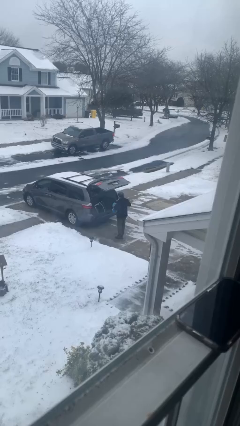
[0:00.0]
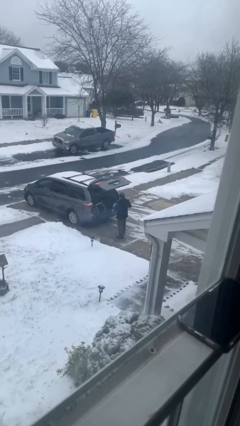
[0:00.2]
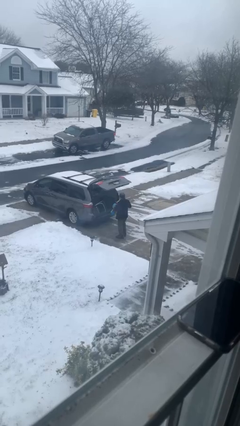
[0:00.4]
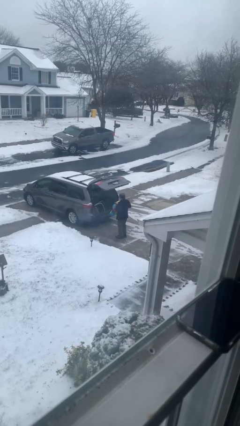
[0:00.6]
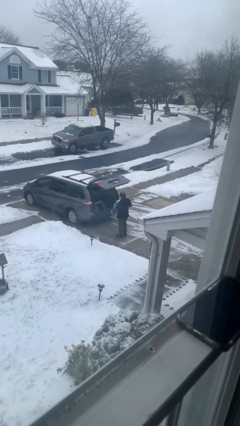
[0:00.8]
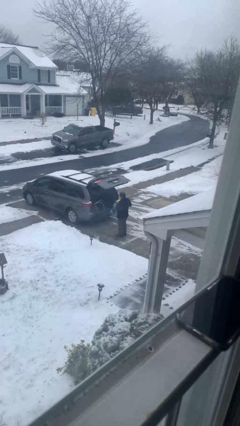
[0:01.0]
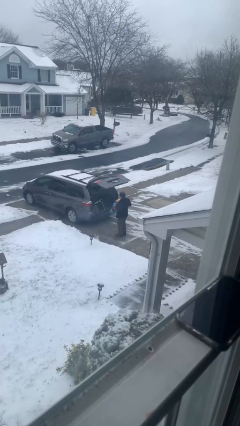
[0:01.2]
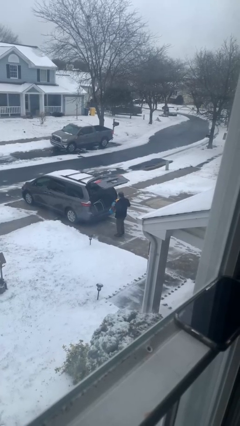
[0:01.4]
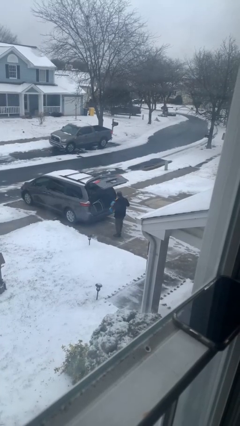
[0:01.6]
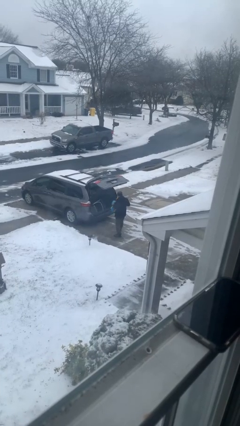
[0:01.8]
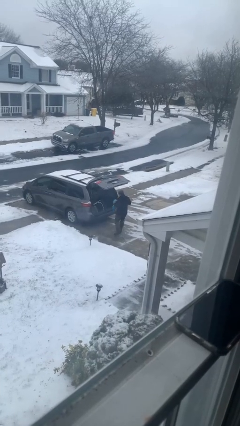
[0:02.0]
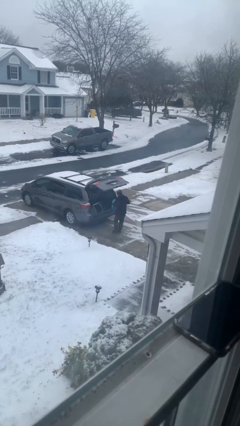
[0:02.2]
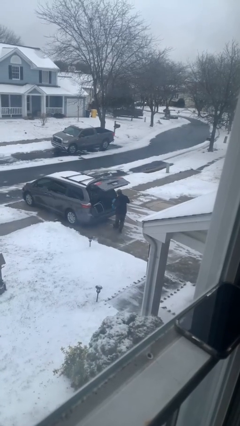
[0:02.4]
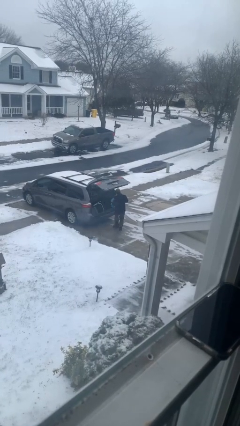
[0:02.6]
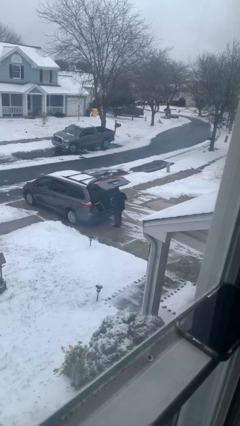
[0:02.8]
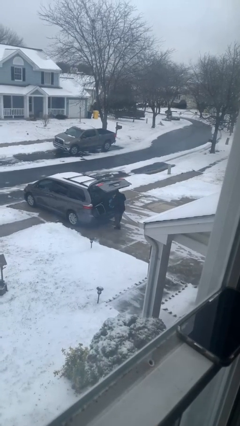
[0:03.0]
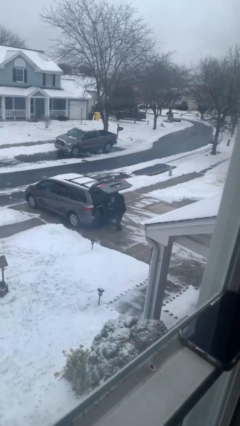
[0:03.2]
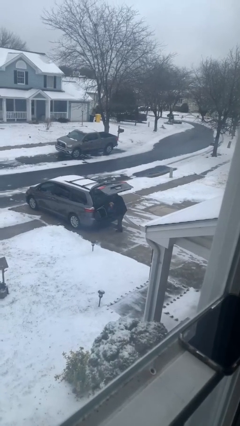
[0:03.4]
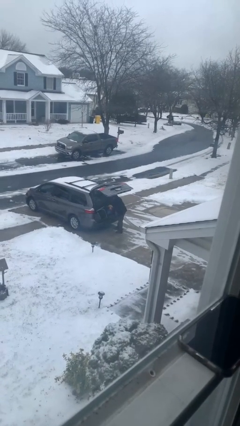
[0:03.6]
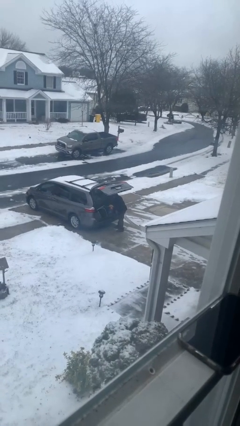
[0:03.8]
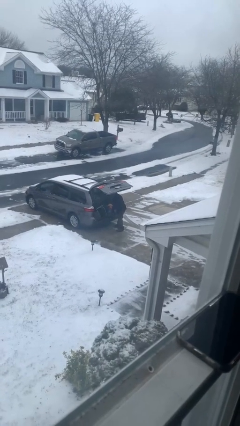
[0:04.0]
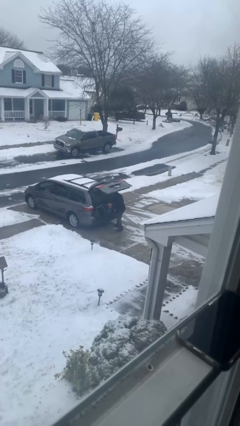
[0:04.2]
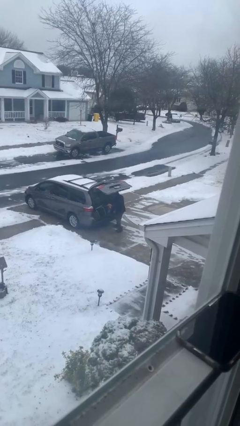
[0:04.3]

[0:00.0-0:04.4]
person loads car

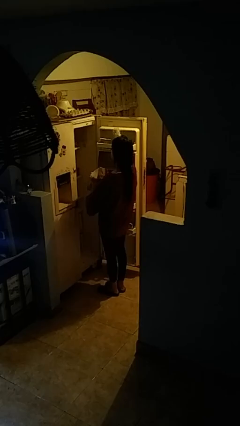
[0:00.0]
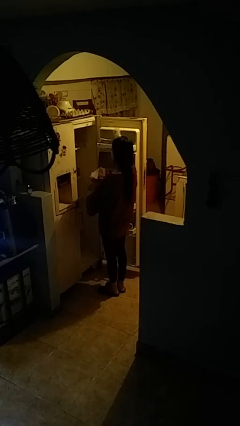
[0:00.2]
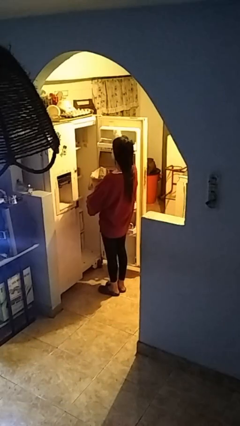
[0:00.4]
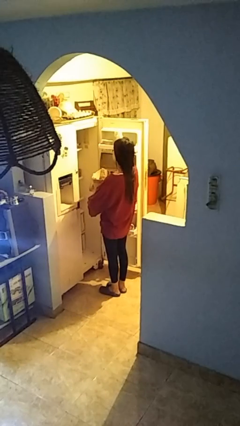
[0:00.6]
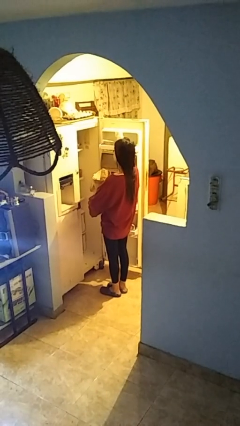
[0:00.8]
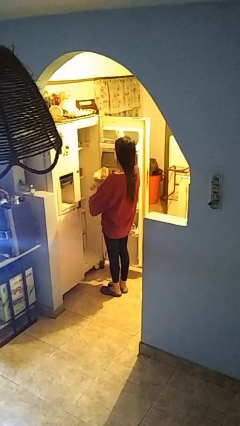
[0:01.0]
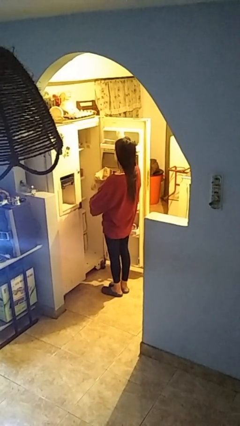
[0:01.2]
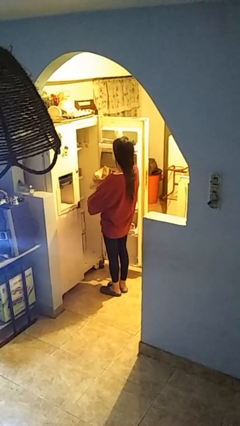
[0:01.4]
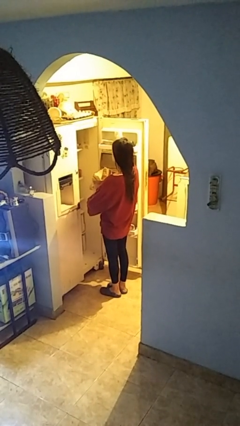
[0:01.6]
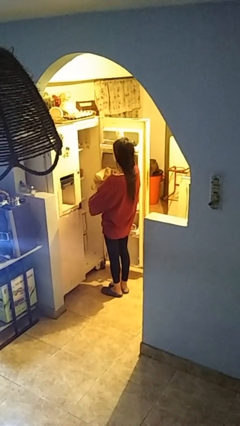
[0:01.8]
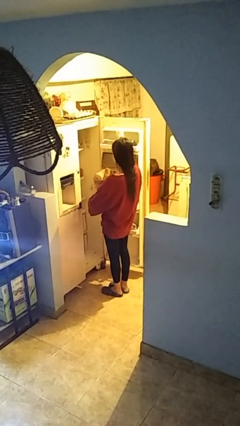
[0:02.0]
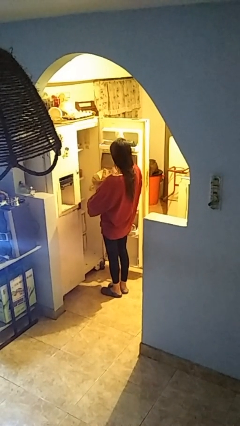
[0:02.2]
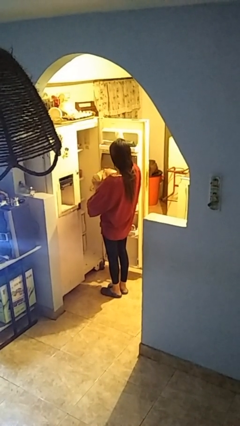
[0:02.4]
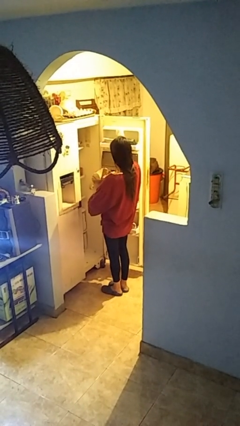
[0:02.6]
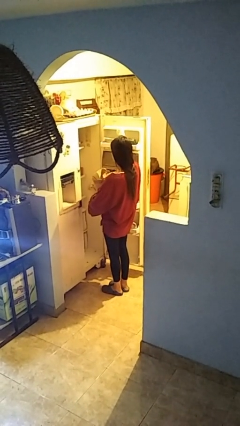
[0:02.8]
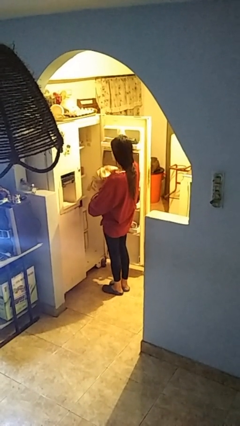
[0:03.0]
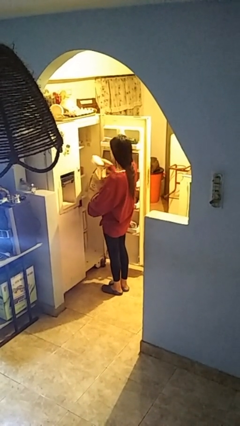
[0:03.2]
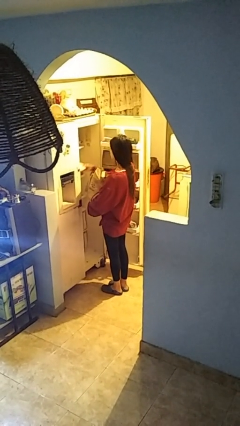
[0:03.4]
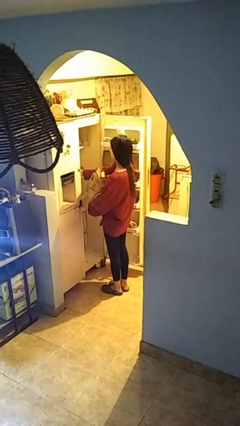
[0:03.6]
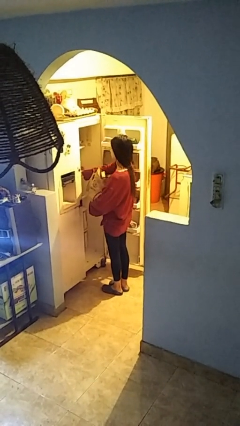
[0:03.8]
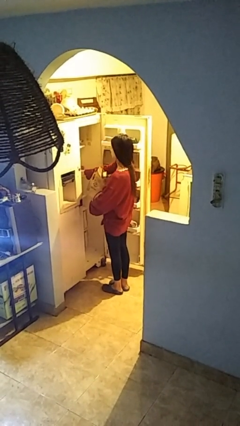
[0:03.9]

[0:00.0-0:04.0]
person loads groceries into refrigerator

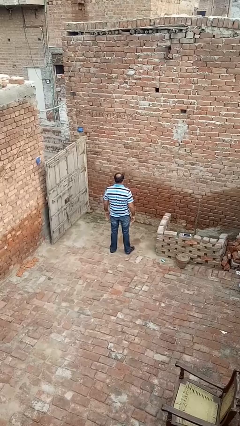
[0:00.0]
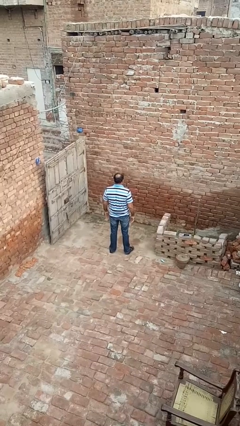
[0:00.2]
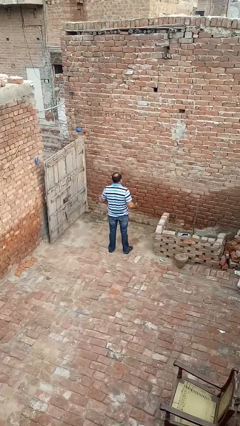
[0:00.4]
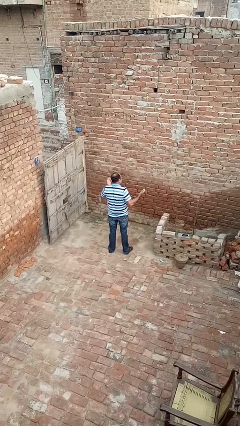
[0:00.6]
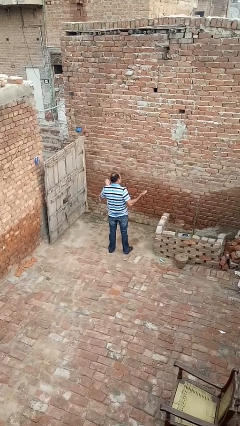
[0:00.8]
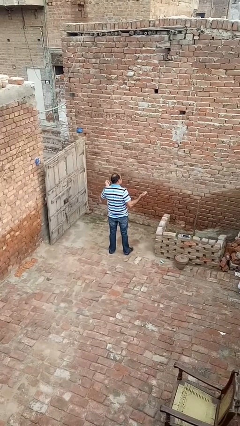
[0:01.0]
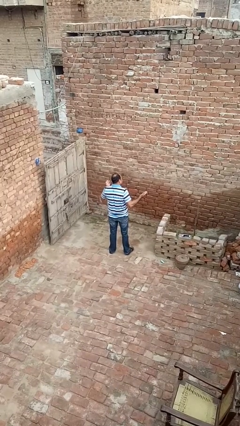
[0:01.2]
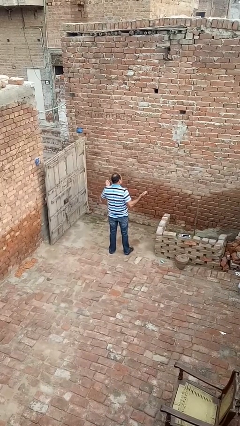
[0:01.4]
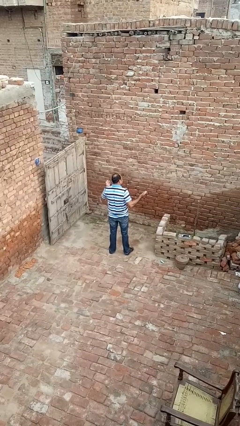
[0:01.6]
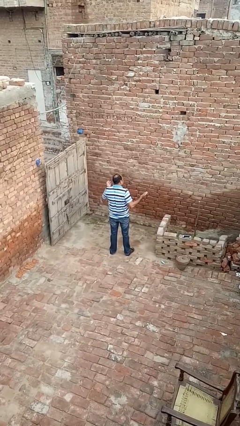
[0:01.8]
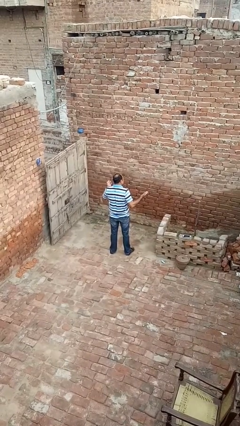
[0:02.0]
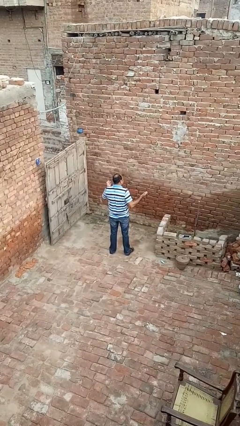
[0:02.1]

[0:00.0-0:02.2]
person shrugs

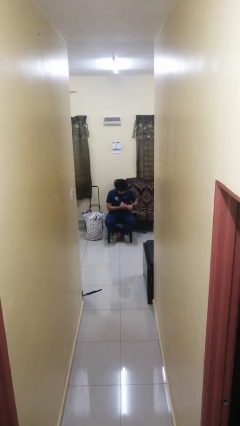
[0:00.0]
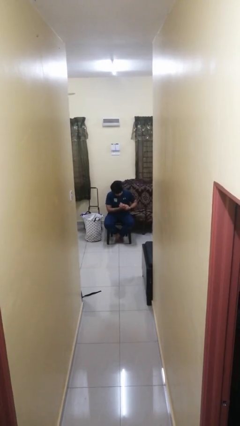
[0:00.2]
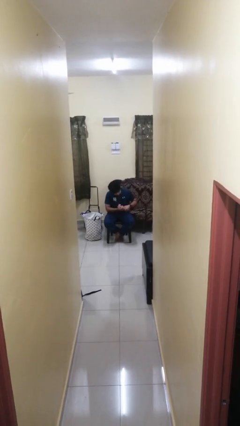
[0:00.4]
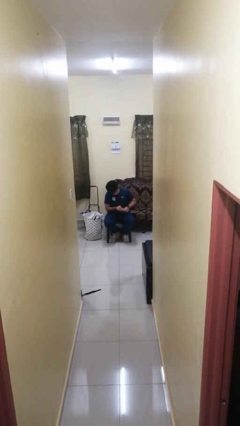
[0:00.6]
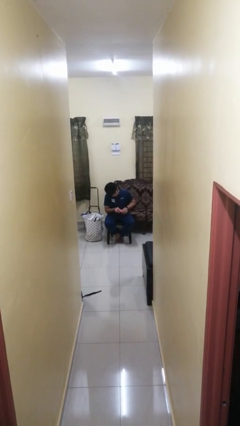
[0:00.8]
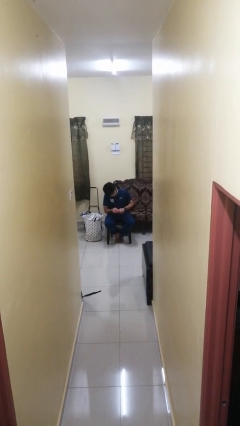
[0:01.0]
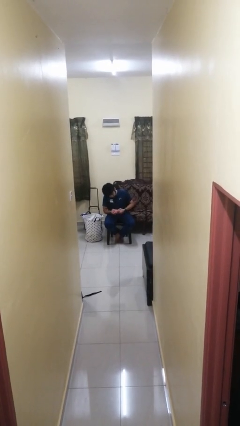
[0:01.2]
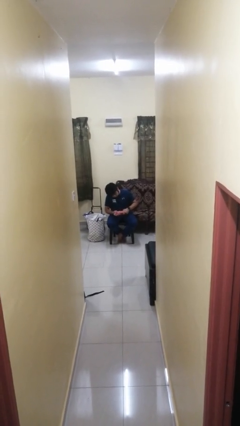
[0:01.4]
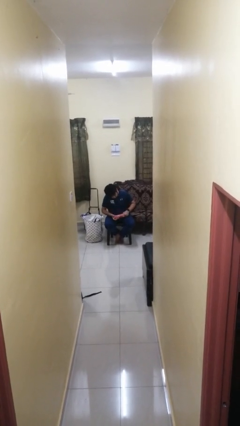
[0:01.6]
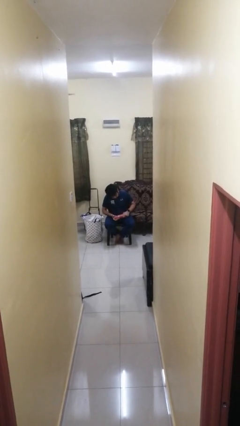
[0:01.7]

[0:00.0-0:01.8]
person squeezes object

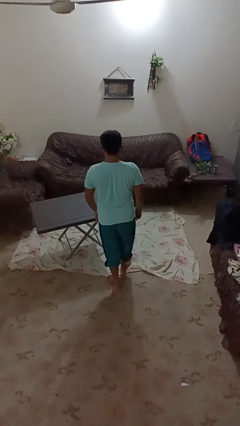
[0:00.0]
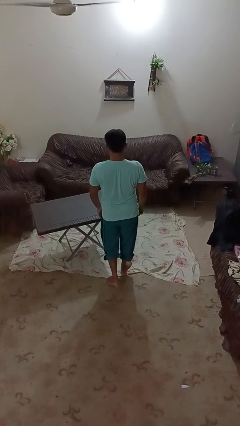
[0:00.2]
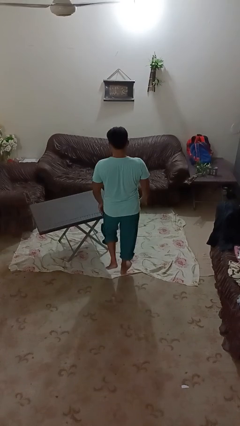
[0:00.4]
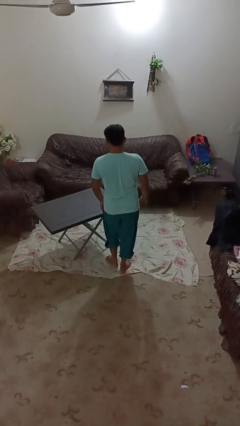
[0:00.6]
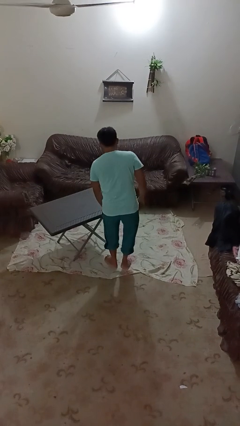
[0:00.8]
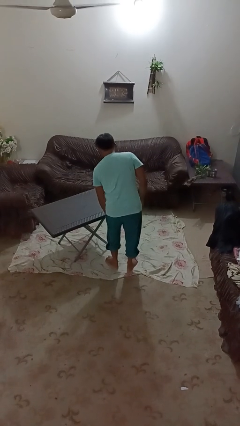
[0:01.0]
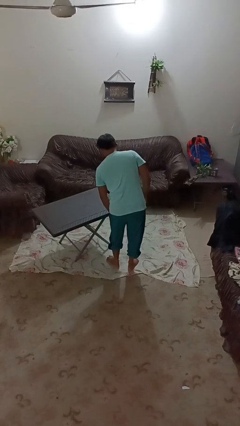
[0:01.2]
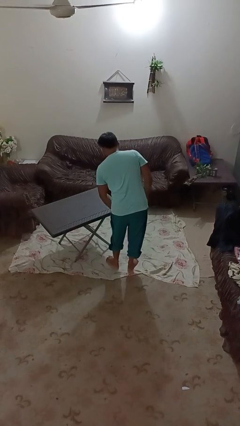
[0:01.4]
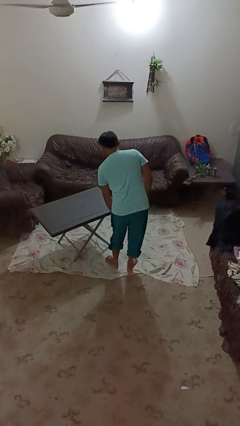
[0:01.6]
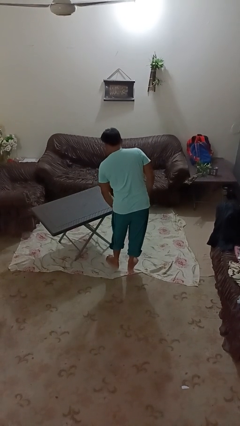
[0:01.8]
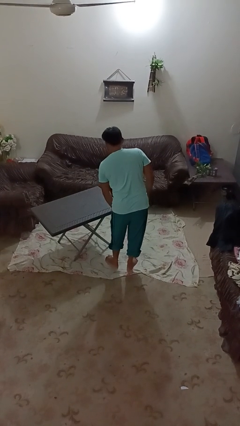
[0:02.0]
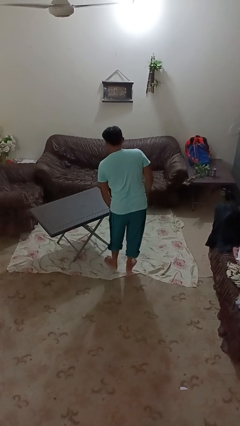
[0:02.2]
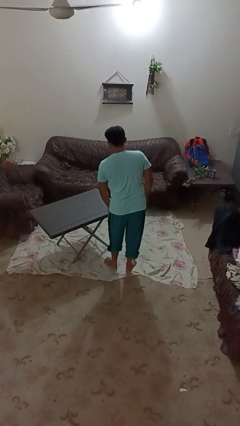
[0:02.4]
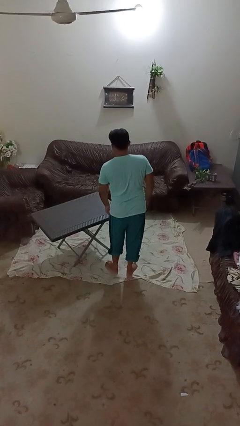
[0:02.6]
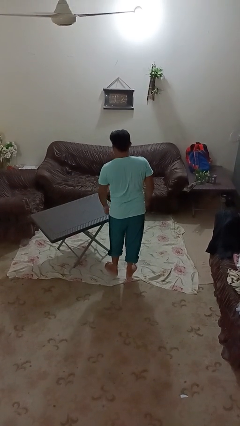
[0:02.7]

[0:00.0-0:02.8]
person bumps into table

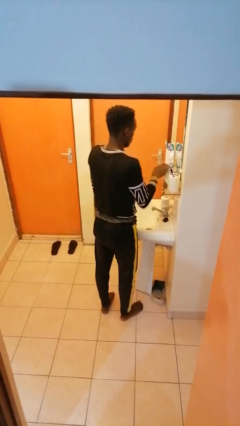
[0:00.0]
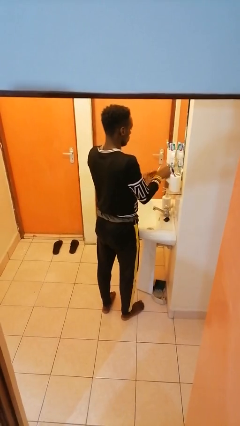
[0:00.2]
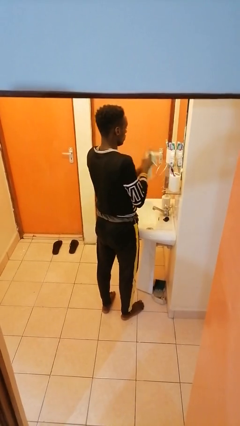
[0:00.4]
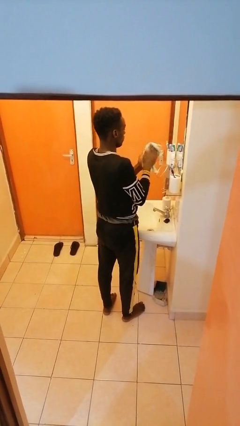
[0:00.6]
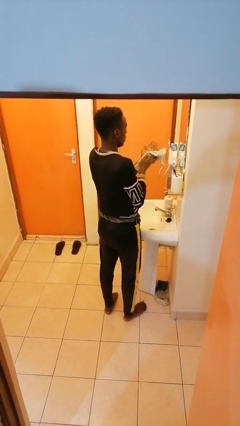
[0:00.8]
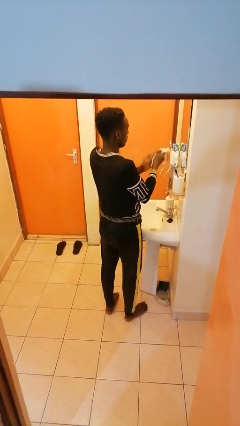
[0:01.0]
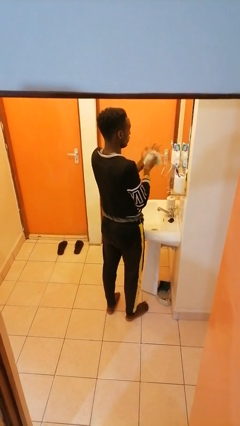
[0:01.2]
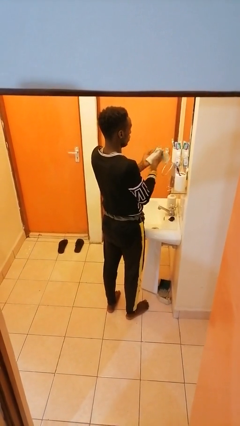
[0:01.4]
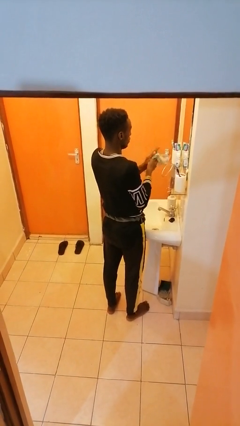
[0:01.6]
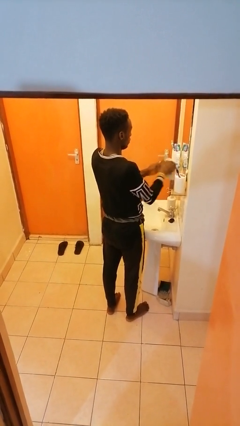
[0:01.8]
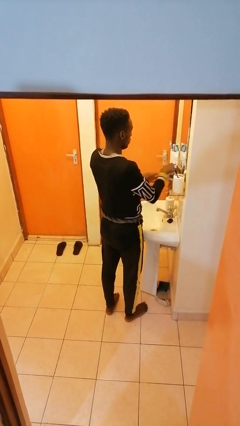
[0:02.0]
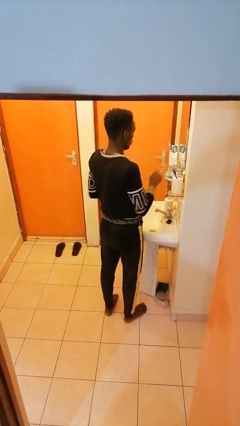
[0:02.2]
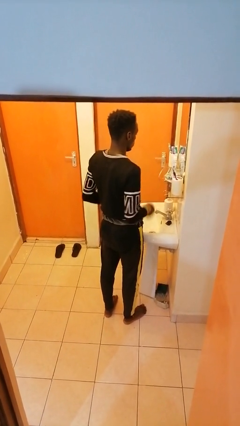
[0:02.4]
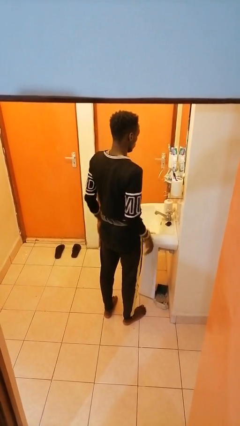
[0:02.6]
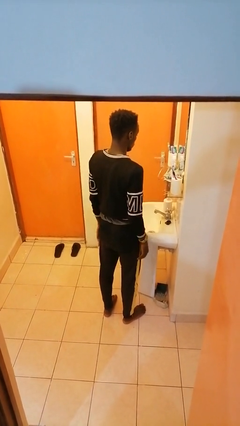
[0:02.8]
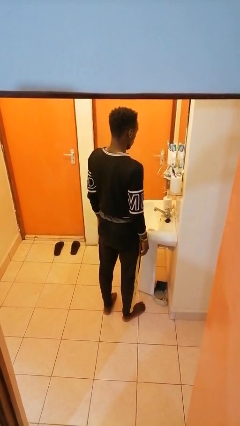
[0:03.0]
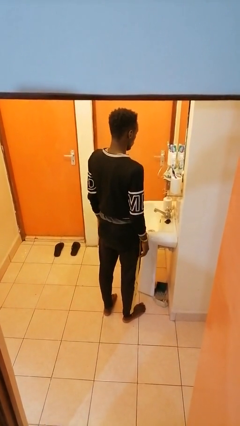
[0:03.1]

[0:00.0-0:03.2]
person dries hands with towel
